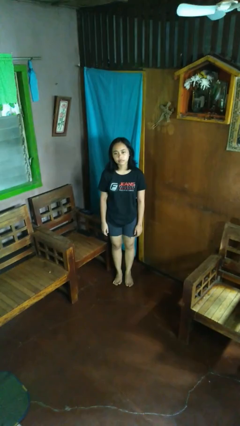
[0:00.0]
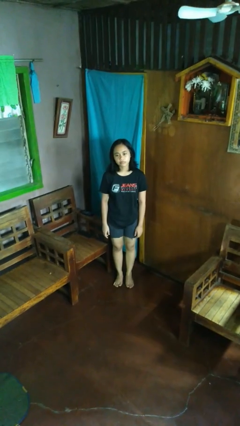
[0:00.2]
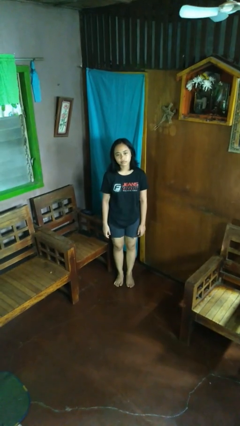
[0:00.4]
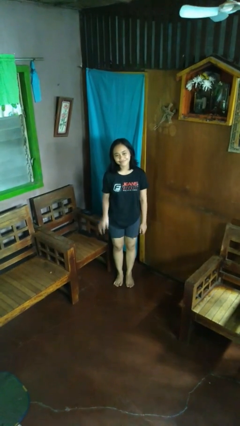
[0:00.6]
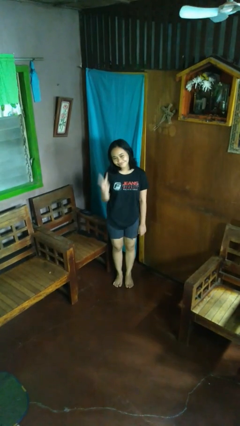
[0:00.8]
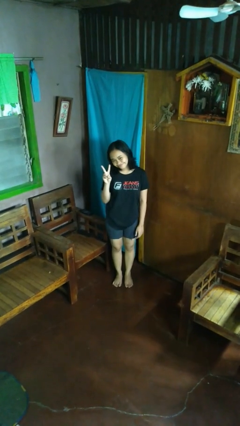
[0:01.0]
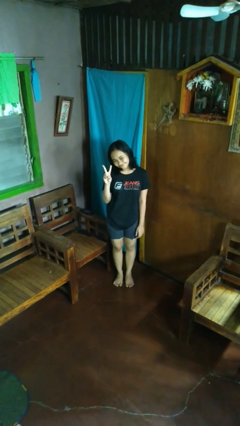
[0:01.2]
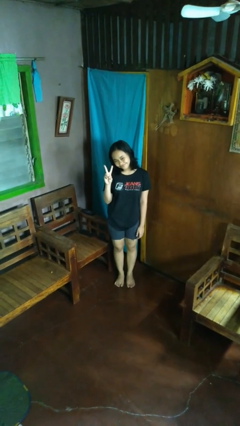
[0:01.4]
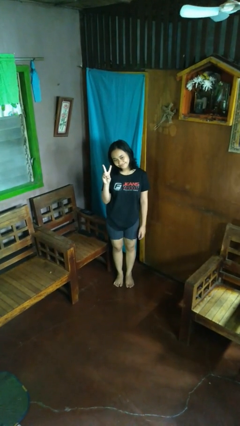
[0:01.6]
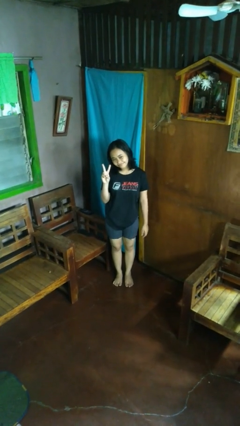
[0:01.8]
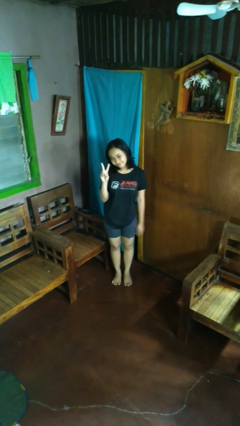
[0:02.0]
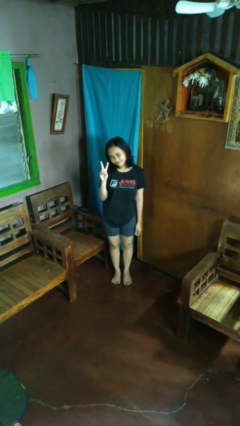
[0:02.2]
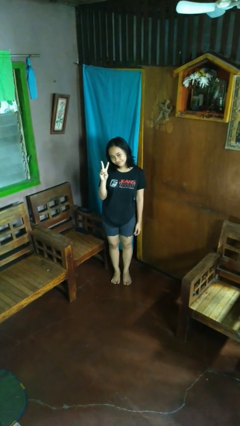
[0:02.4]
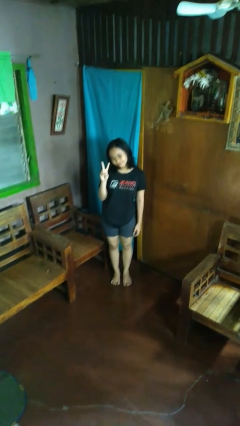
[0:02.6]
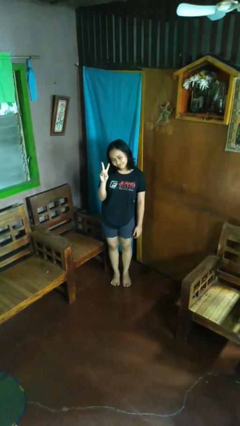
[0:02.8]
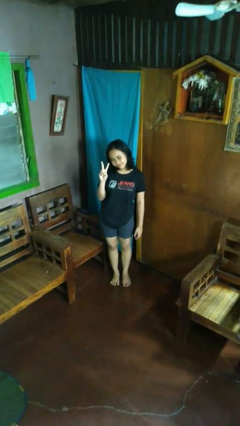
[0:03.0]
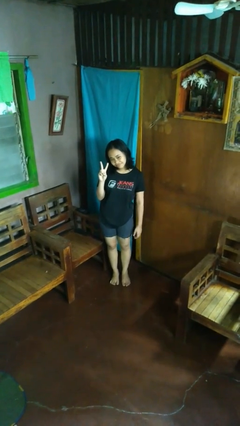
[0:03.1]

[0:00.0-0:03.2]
person gestures peace

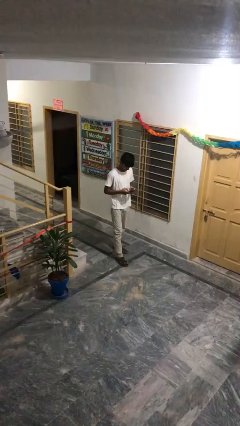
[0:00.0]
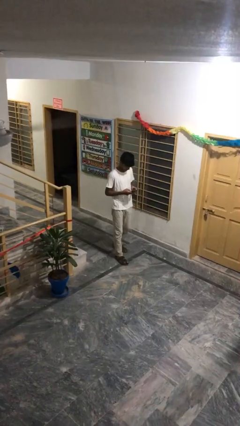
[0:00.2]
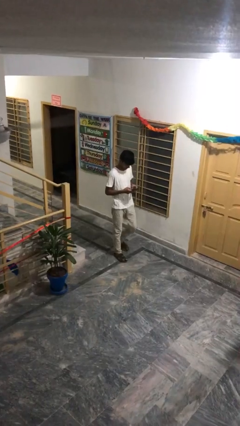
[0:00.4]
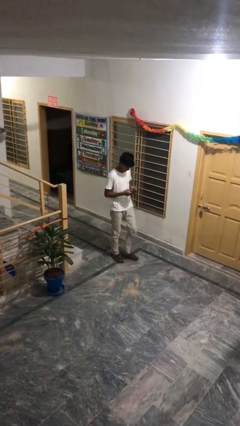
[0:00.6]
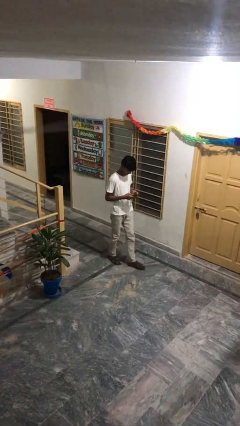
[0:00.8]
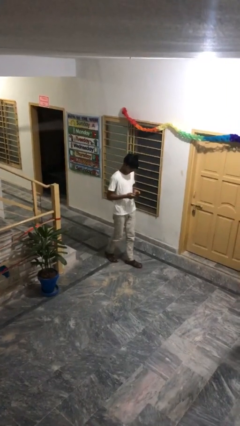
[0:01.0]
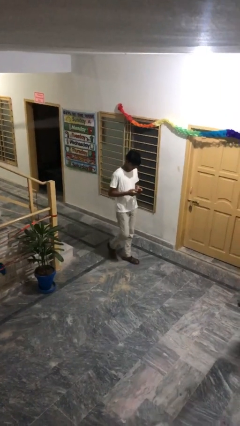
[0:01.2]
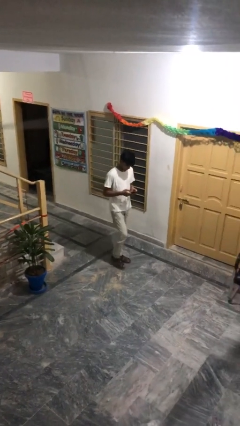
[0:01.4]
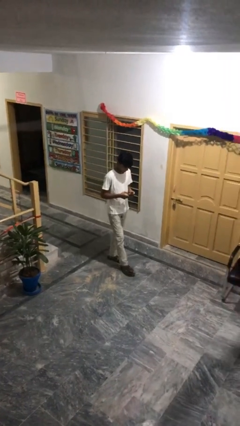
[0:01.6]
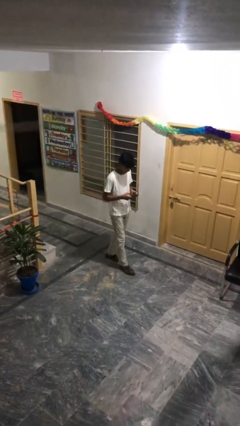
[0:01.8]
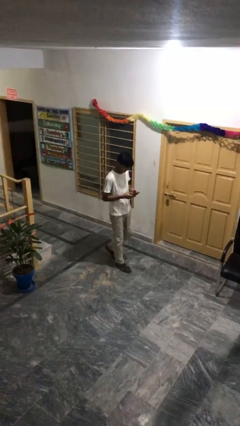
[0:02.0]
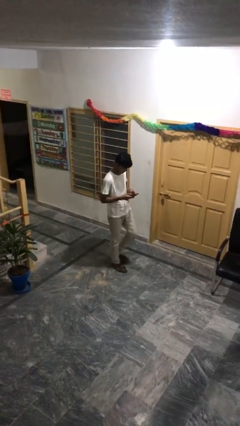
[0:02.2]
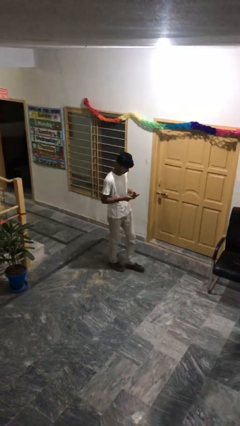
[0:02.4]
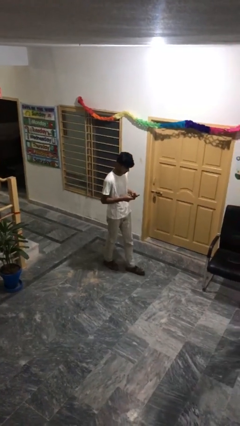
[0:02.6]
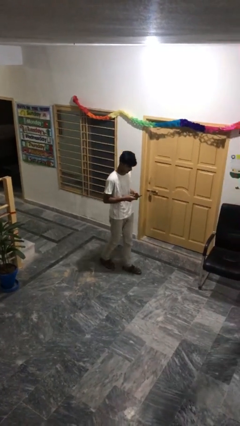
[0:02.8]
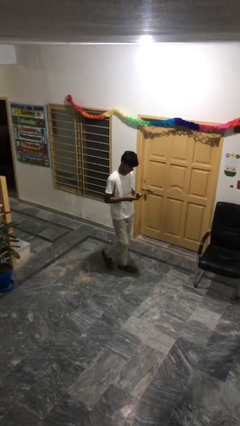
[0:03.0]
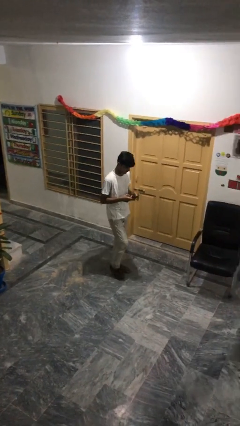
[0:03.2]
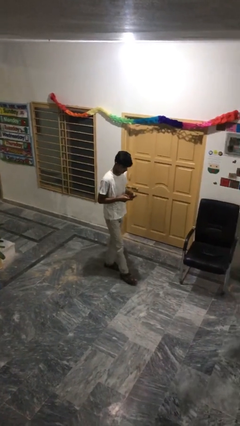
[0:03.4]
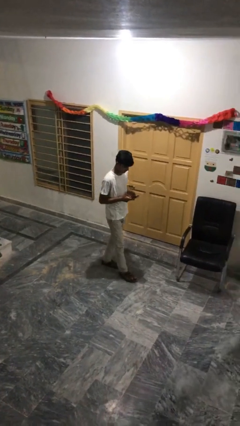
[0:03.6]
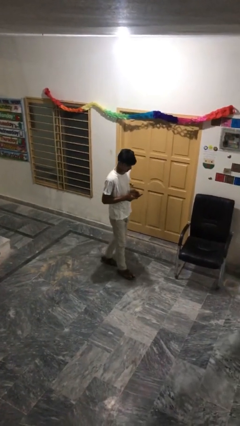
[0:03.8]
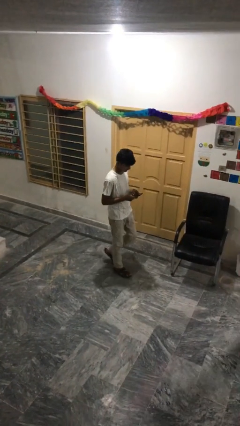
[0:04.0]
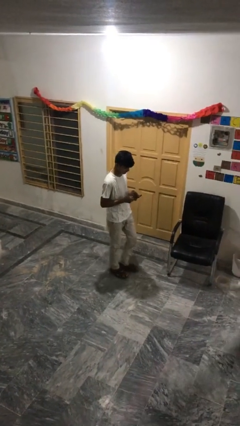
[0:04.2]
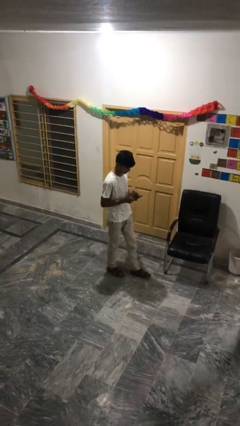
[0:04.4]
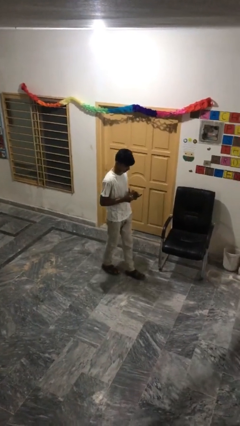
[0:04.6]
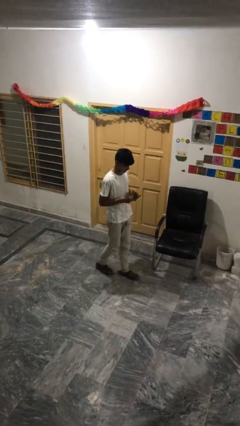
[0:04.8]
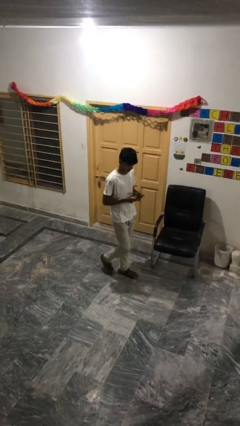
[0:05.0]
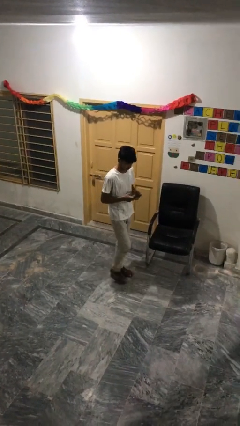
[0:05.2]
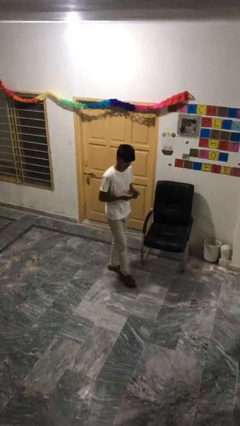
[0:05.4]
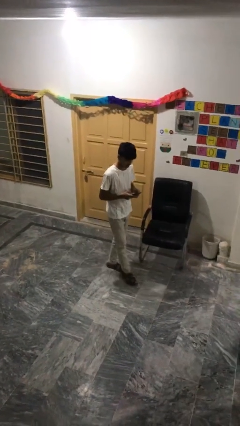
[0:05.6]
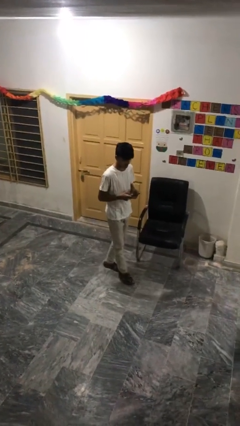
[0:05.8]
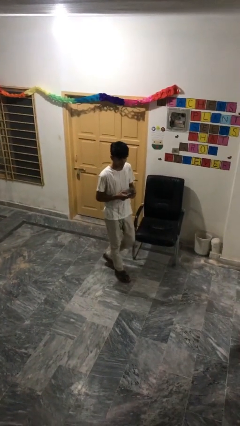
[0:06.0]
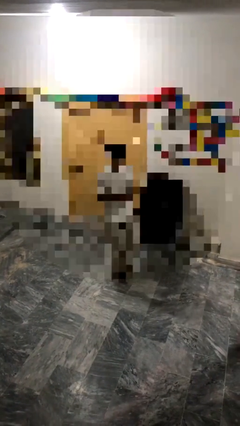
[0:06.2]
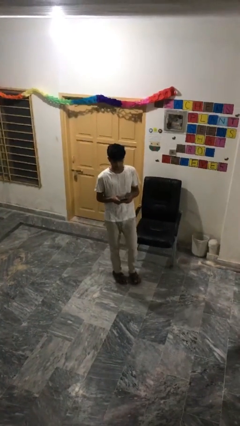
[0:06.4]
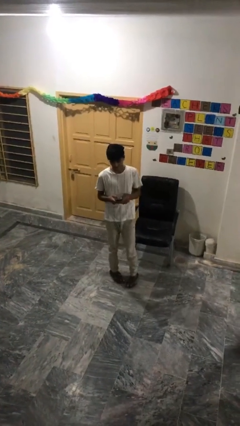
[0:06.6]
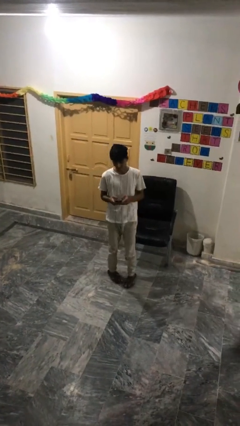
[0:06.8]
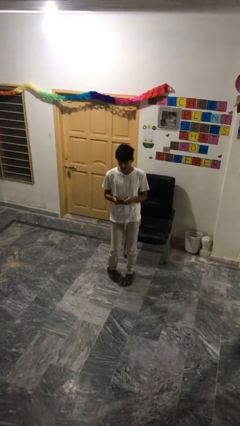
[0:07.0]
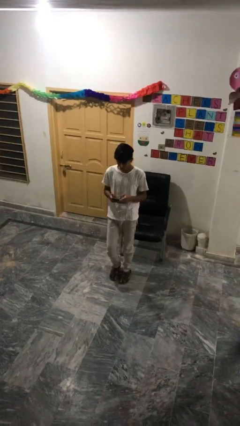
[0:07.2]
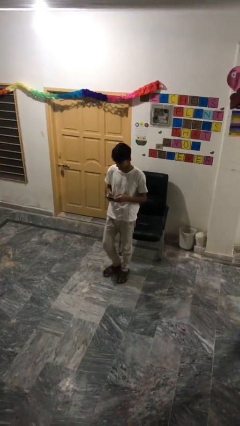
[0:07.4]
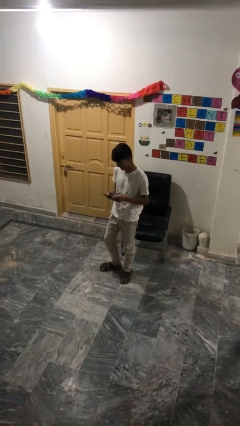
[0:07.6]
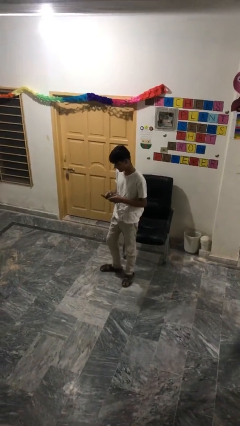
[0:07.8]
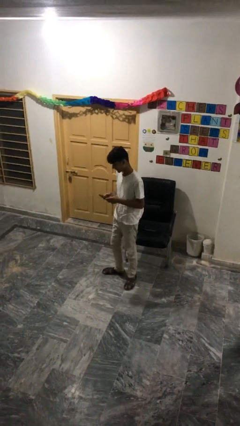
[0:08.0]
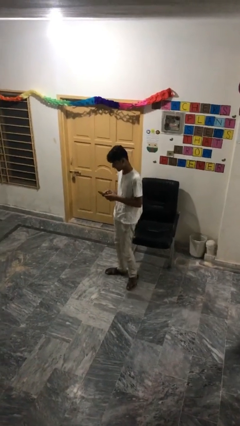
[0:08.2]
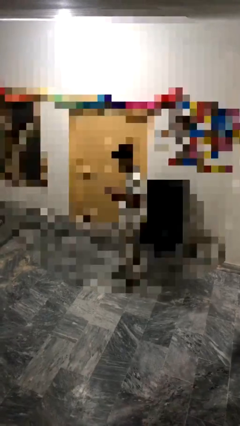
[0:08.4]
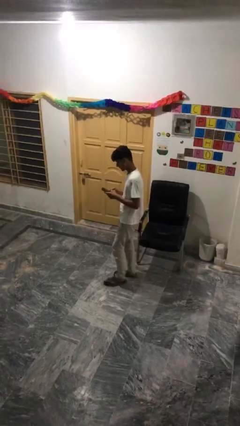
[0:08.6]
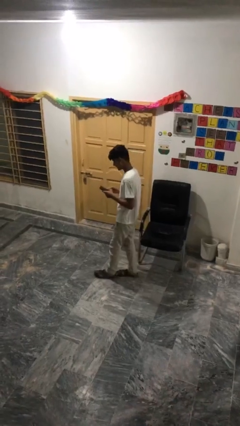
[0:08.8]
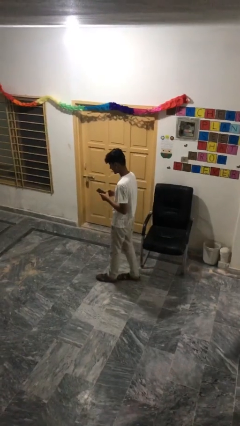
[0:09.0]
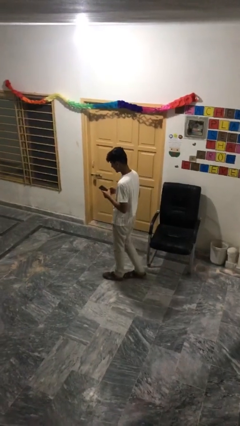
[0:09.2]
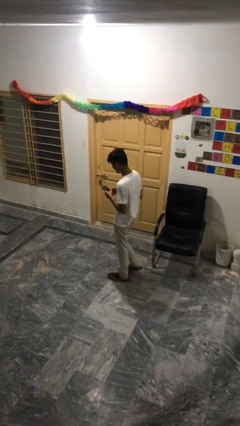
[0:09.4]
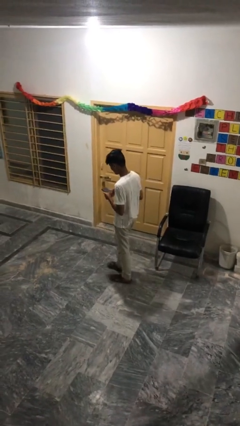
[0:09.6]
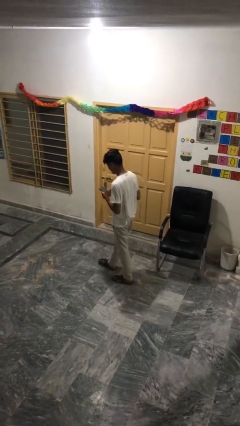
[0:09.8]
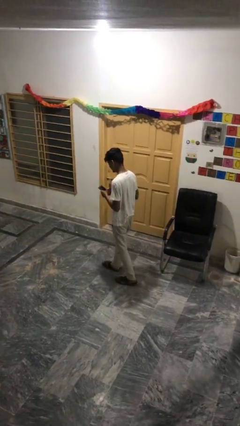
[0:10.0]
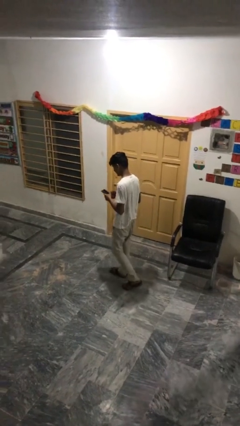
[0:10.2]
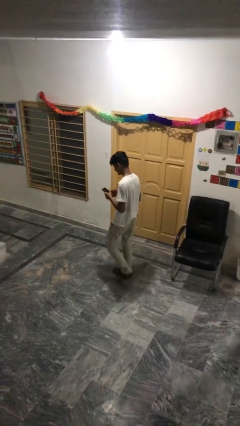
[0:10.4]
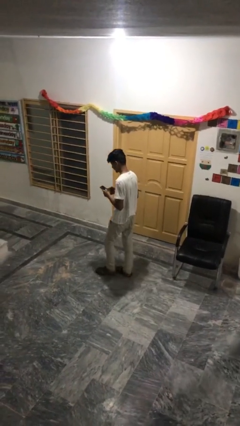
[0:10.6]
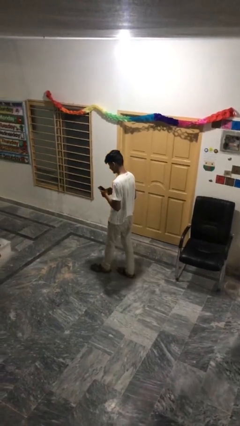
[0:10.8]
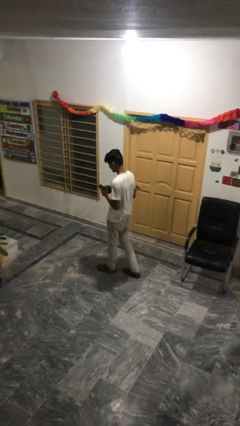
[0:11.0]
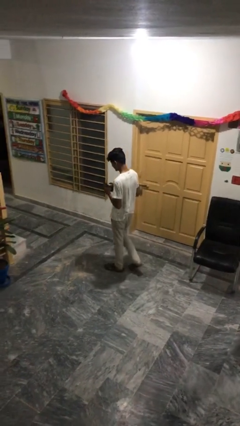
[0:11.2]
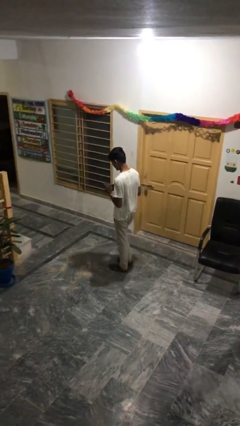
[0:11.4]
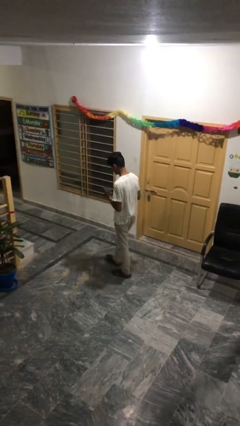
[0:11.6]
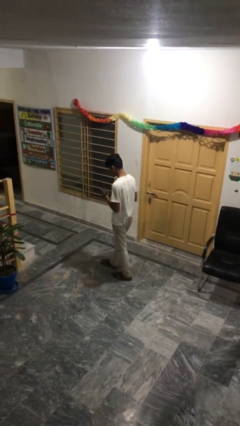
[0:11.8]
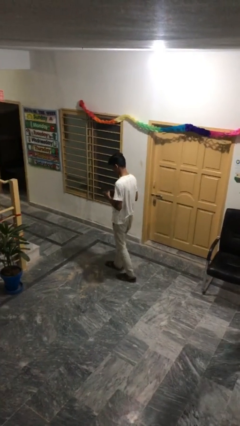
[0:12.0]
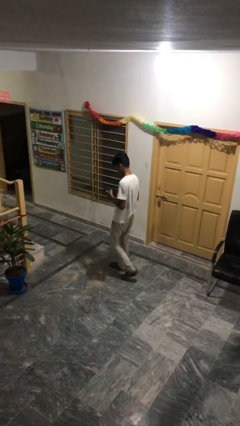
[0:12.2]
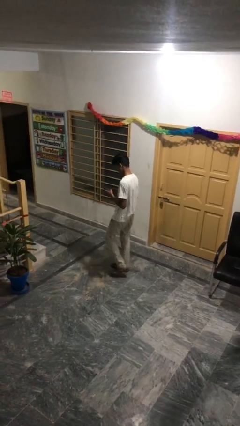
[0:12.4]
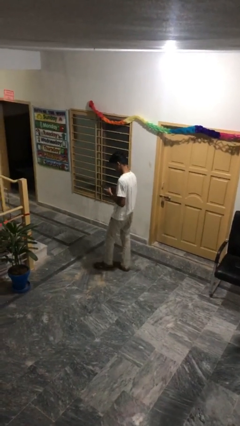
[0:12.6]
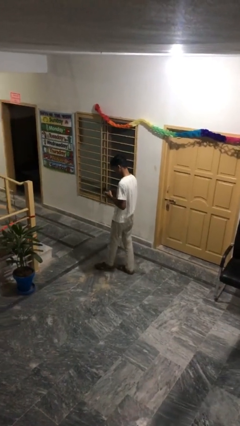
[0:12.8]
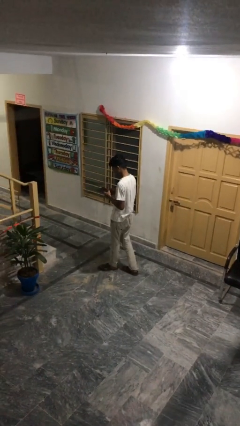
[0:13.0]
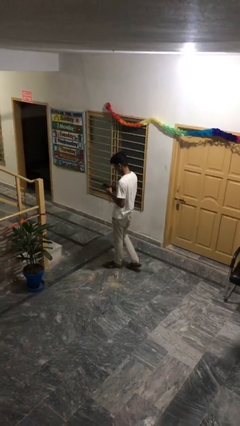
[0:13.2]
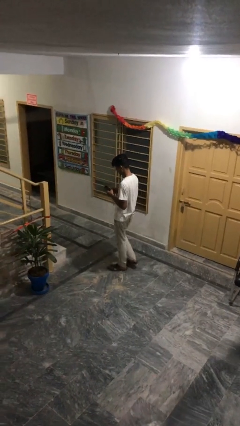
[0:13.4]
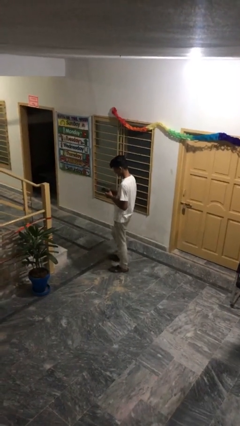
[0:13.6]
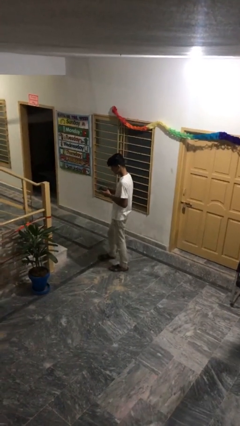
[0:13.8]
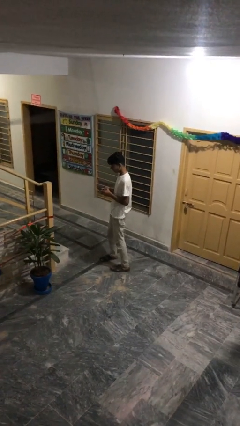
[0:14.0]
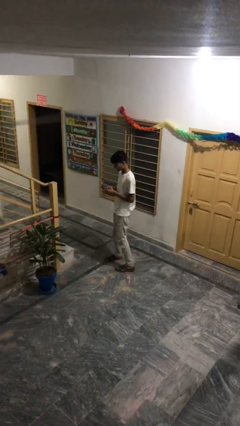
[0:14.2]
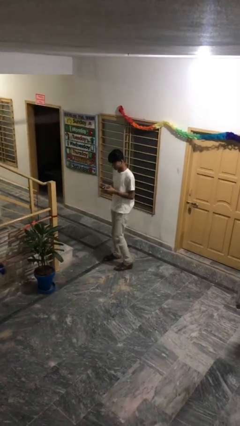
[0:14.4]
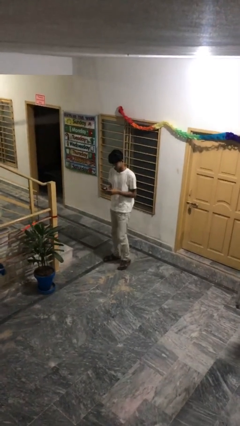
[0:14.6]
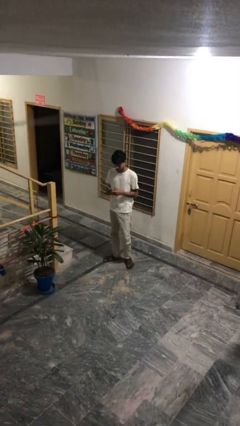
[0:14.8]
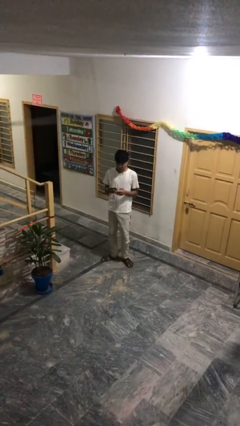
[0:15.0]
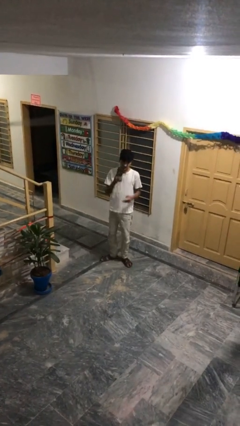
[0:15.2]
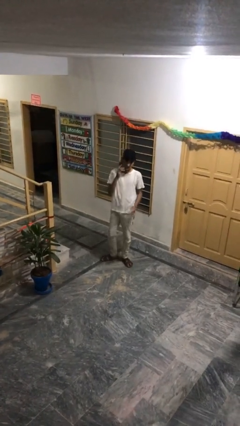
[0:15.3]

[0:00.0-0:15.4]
person texts on phone
